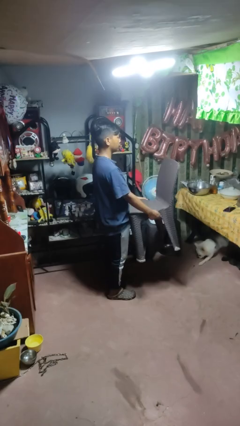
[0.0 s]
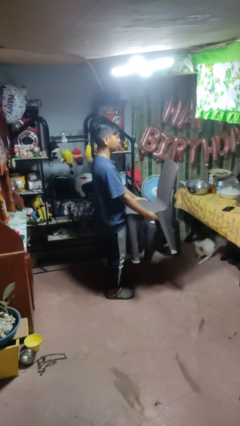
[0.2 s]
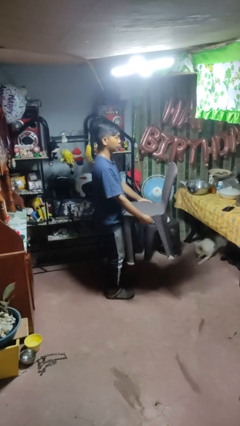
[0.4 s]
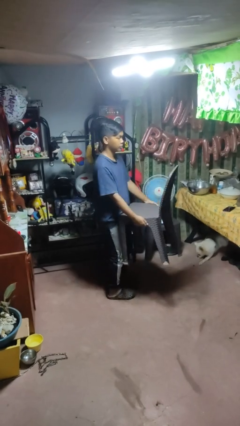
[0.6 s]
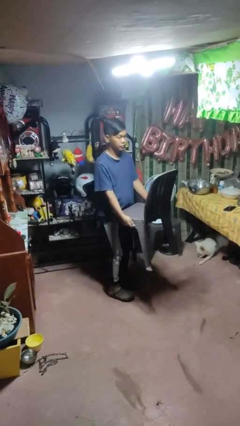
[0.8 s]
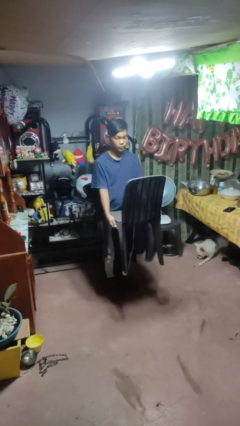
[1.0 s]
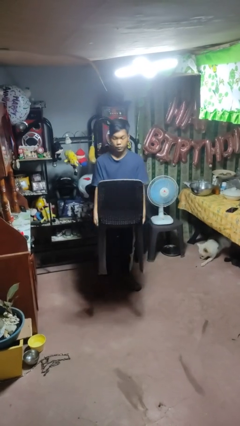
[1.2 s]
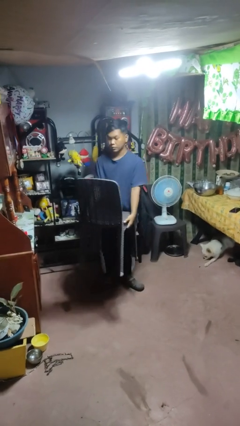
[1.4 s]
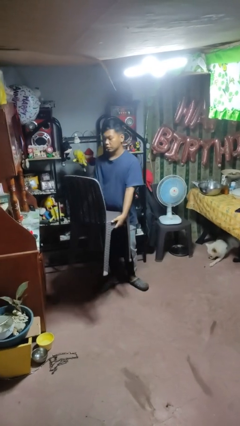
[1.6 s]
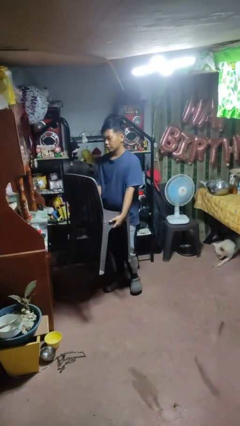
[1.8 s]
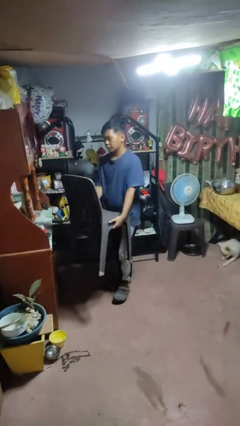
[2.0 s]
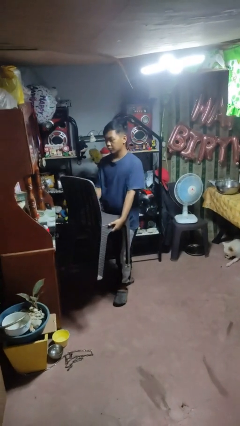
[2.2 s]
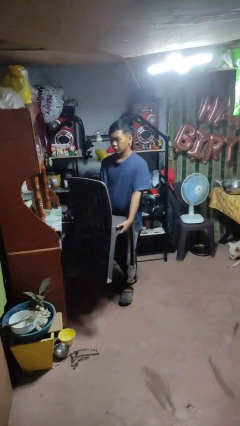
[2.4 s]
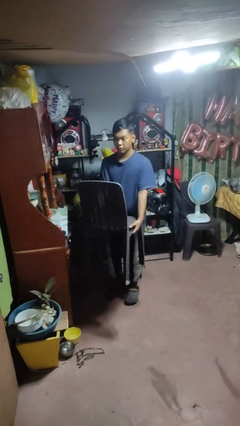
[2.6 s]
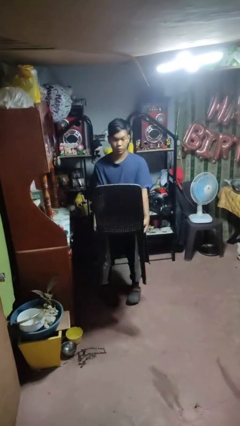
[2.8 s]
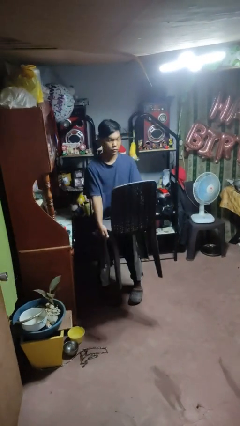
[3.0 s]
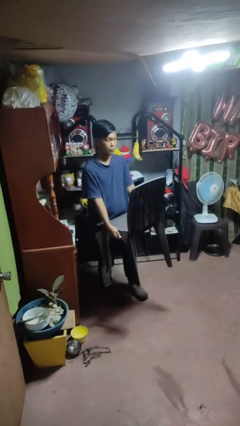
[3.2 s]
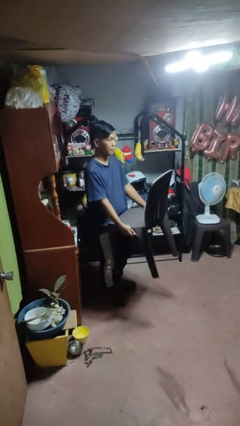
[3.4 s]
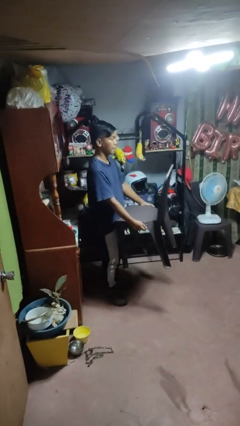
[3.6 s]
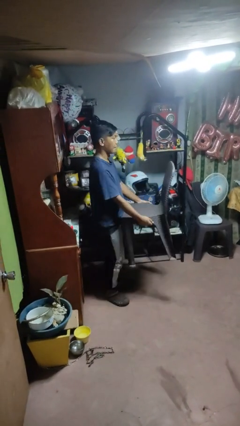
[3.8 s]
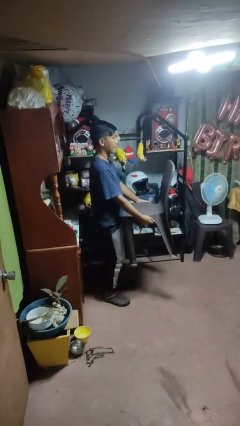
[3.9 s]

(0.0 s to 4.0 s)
person carries furniture

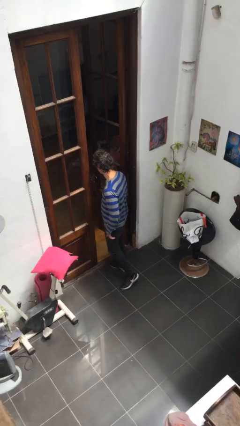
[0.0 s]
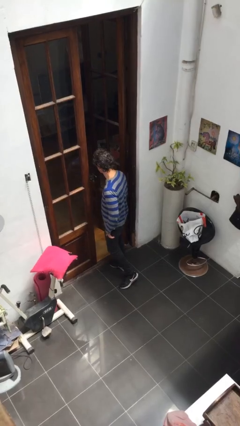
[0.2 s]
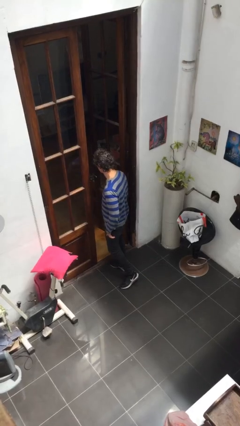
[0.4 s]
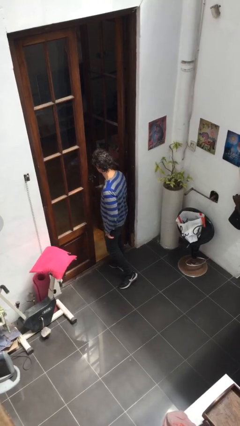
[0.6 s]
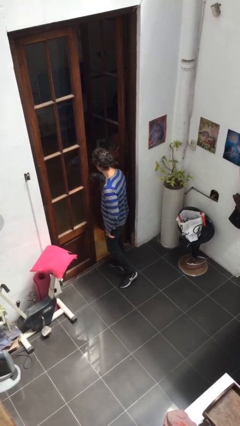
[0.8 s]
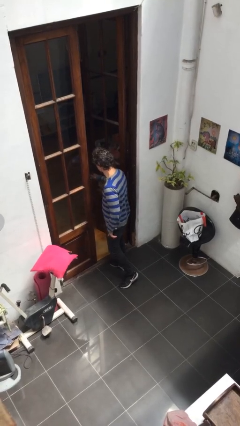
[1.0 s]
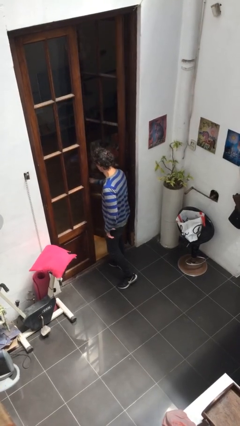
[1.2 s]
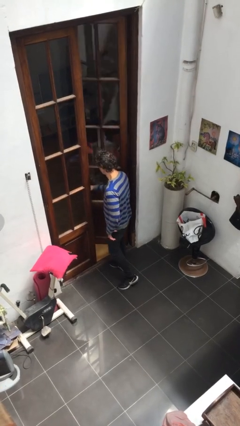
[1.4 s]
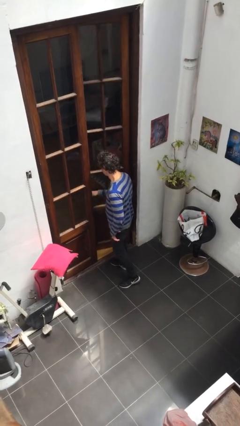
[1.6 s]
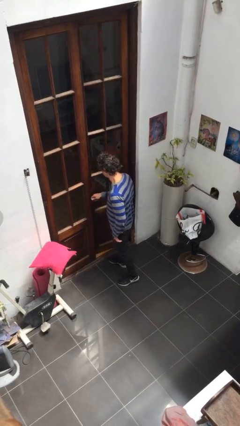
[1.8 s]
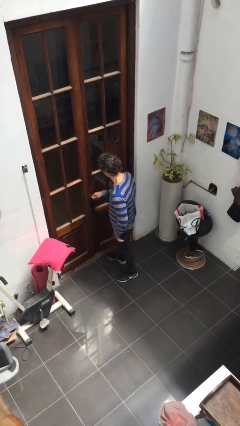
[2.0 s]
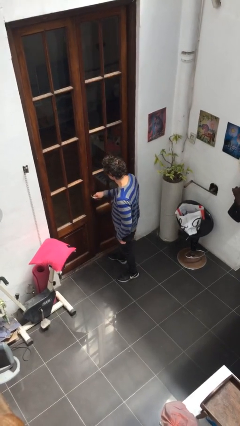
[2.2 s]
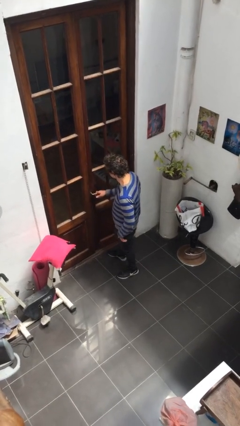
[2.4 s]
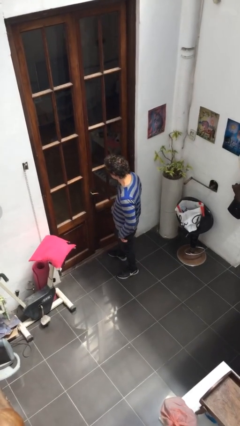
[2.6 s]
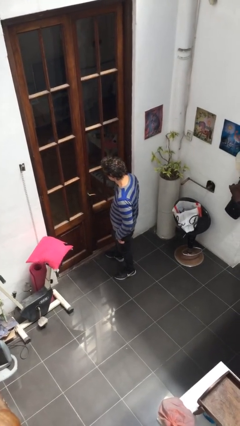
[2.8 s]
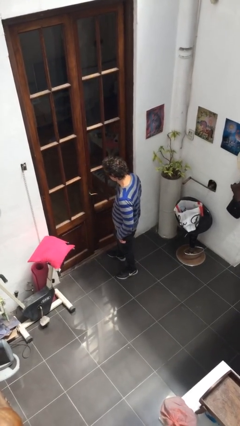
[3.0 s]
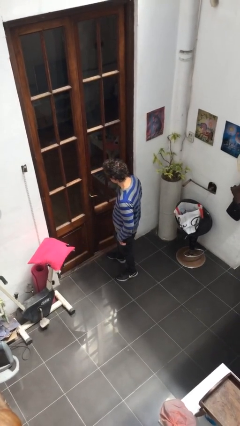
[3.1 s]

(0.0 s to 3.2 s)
person closes facility door

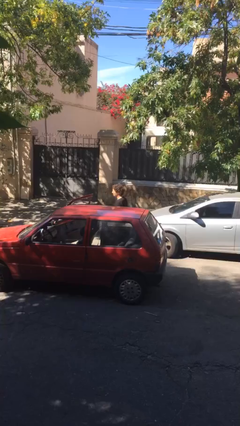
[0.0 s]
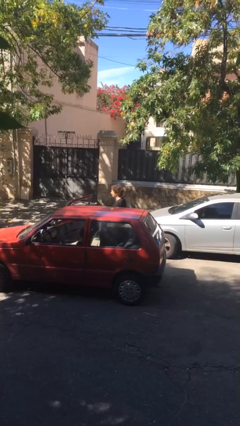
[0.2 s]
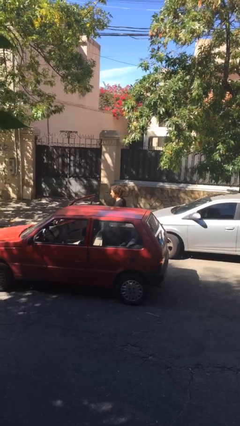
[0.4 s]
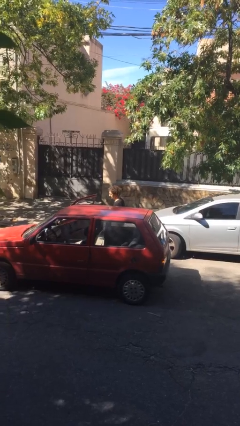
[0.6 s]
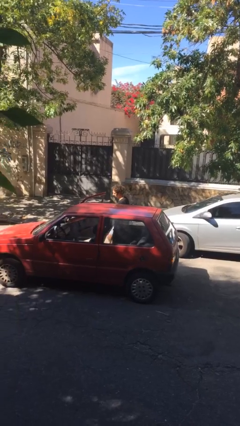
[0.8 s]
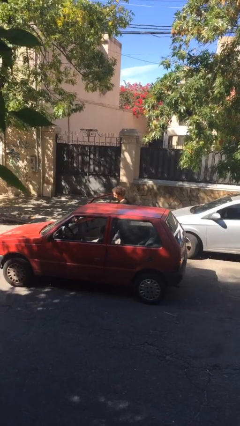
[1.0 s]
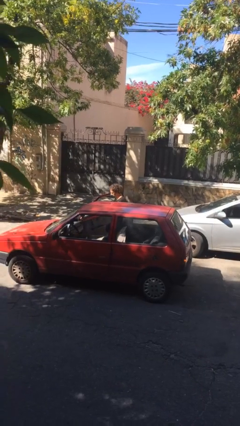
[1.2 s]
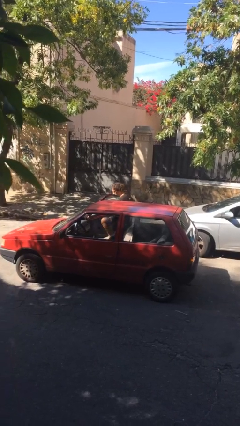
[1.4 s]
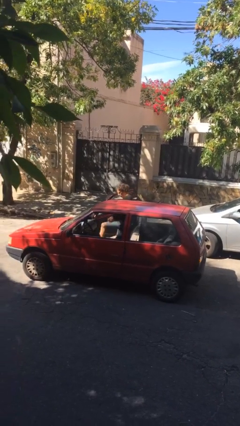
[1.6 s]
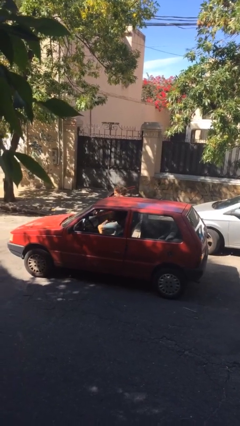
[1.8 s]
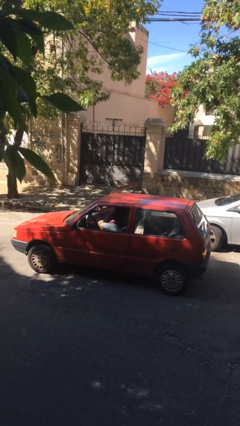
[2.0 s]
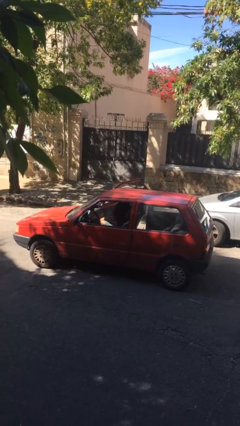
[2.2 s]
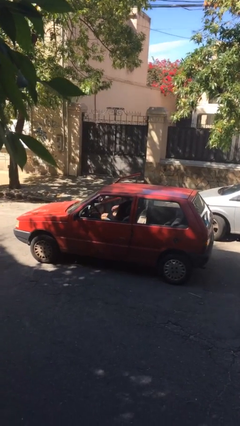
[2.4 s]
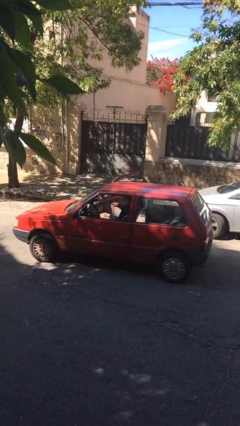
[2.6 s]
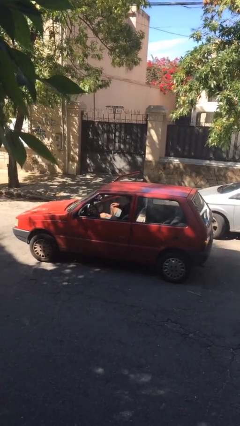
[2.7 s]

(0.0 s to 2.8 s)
person enters car

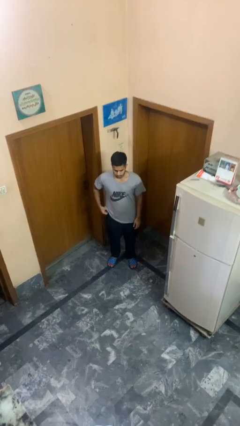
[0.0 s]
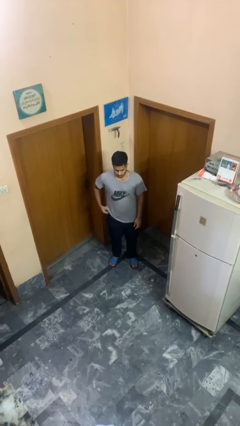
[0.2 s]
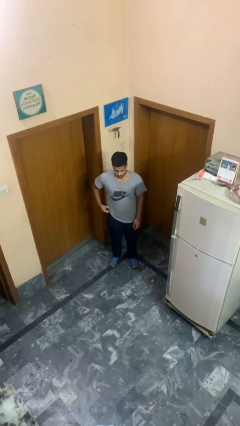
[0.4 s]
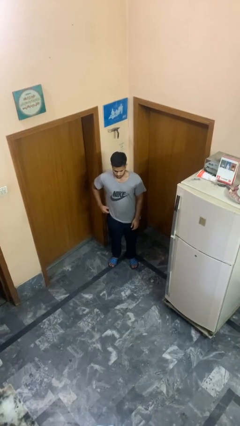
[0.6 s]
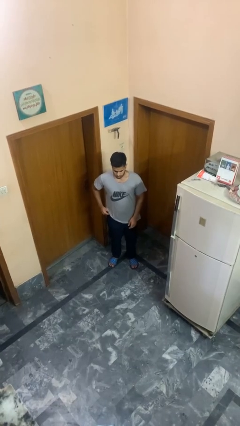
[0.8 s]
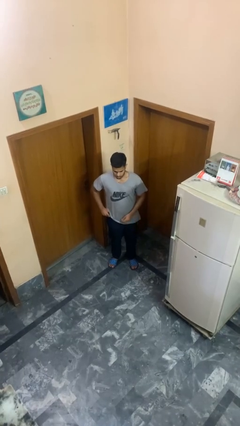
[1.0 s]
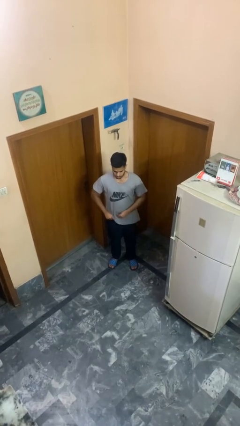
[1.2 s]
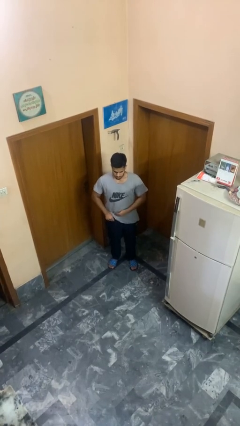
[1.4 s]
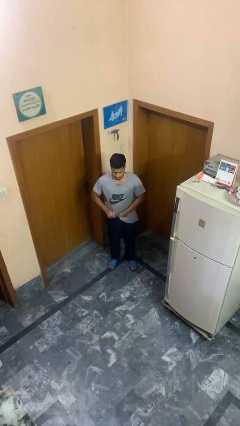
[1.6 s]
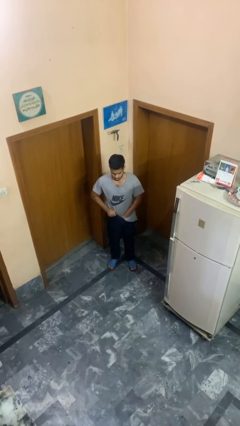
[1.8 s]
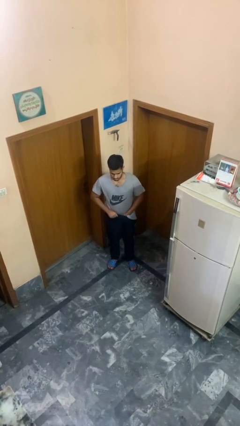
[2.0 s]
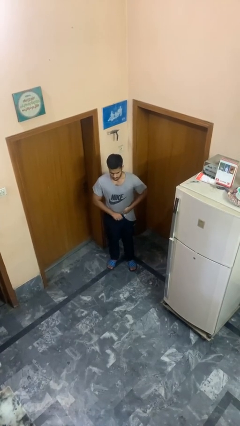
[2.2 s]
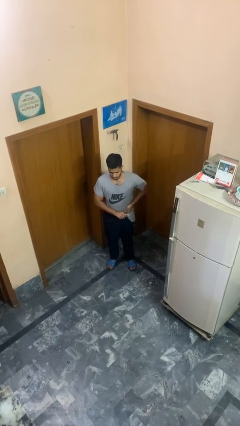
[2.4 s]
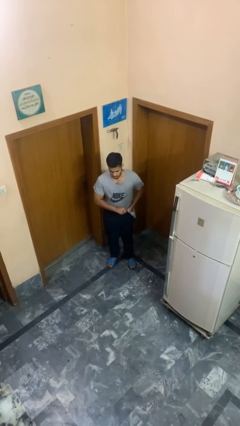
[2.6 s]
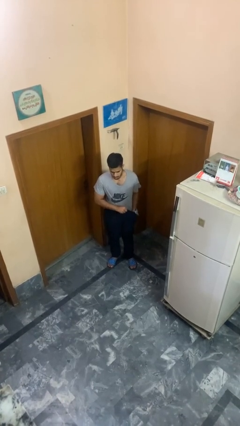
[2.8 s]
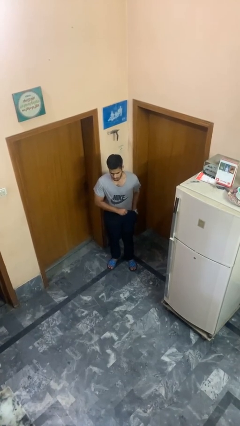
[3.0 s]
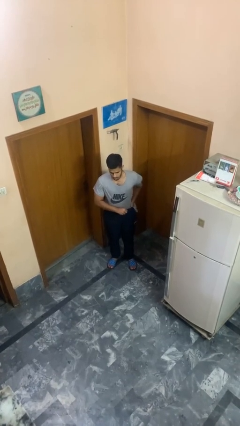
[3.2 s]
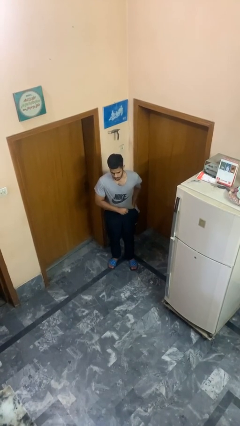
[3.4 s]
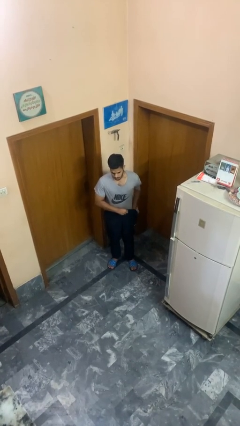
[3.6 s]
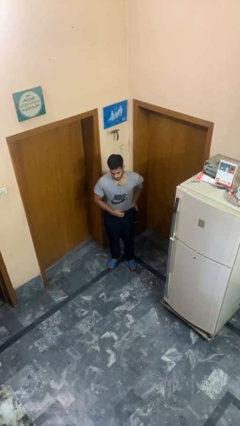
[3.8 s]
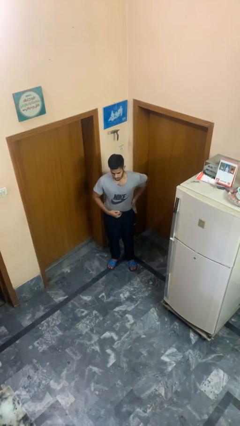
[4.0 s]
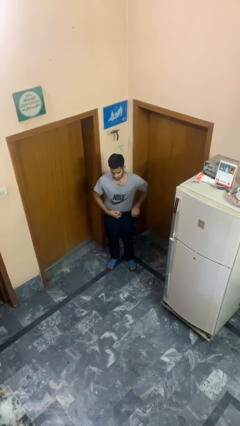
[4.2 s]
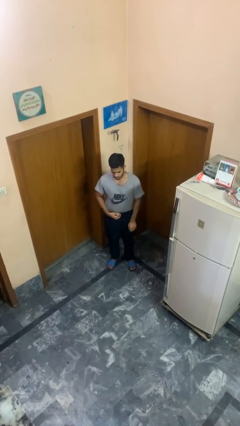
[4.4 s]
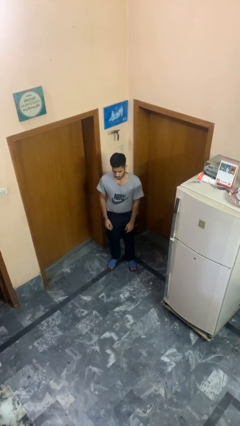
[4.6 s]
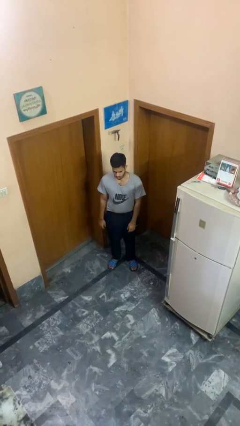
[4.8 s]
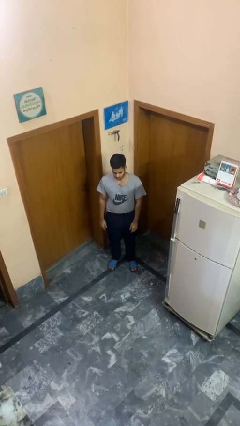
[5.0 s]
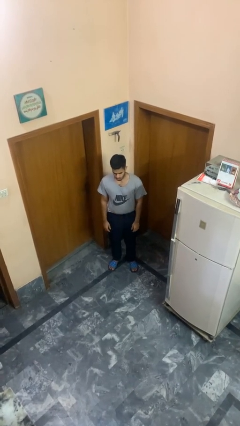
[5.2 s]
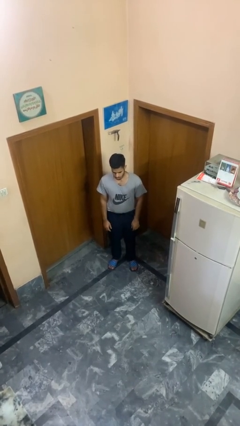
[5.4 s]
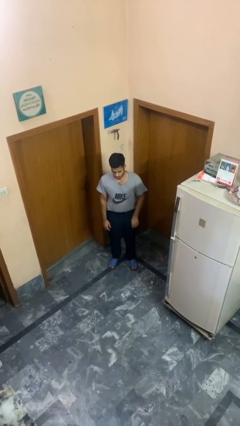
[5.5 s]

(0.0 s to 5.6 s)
person tucks in shirt

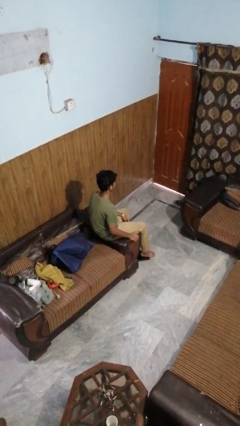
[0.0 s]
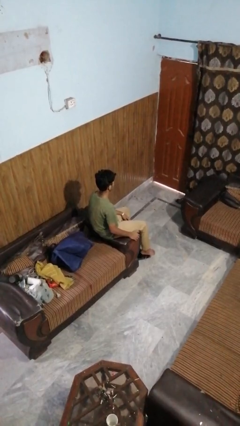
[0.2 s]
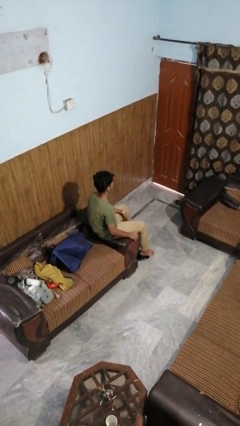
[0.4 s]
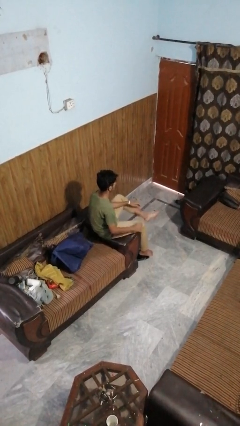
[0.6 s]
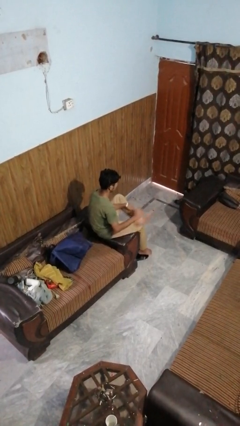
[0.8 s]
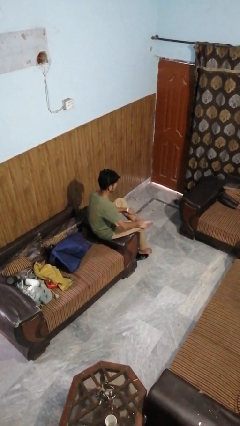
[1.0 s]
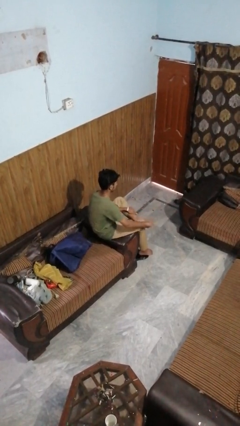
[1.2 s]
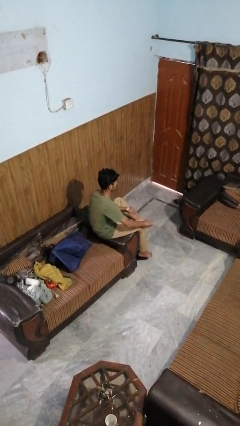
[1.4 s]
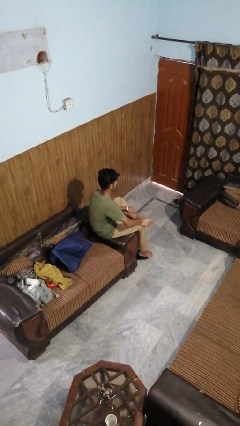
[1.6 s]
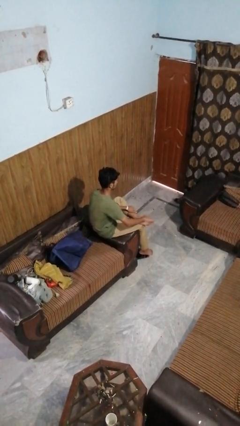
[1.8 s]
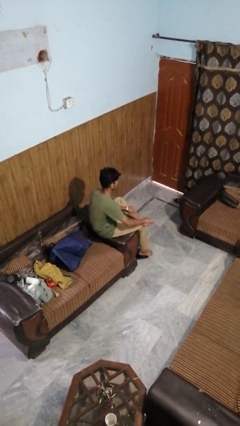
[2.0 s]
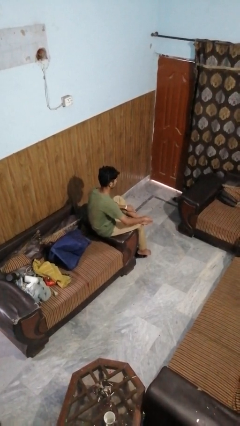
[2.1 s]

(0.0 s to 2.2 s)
person rubs foot

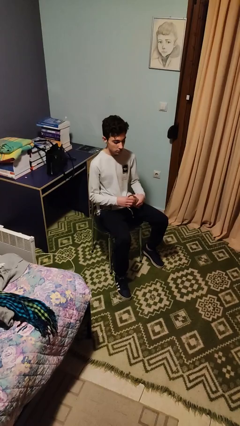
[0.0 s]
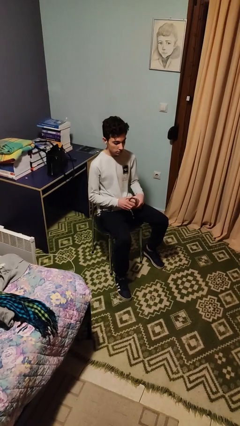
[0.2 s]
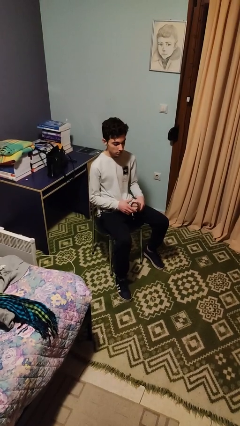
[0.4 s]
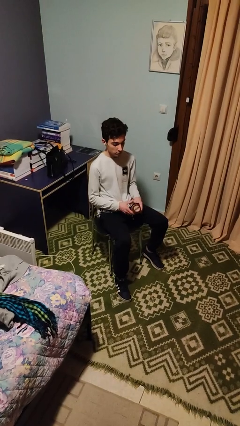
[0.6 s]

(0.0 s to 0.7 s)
person closes jar
